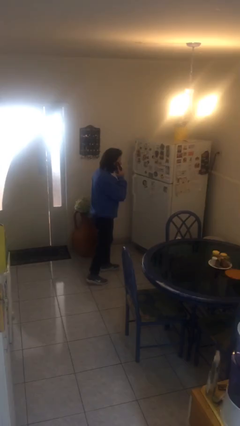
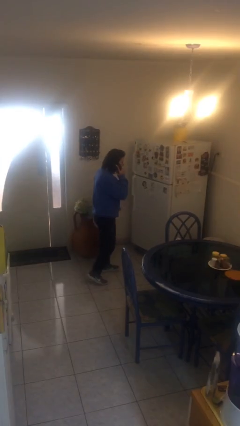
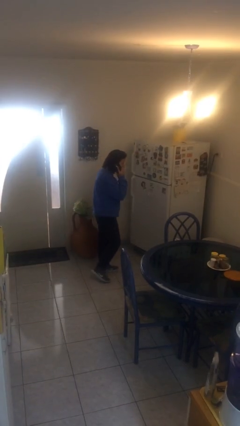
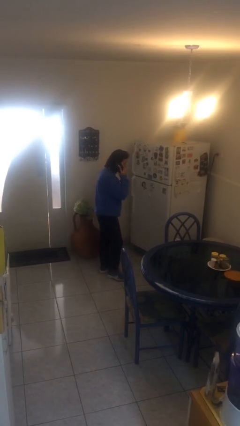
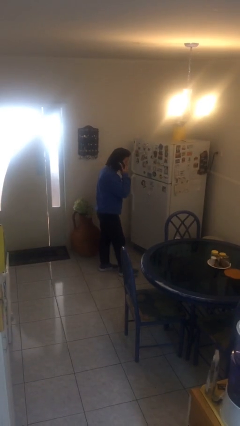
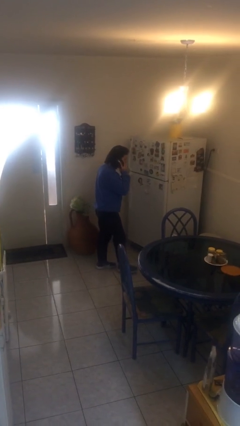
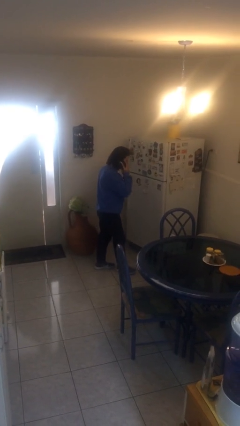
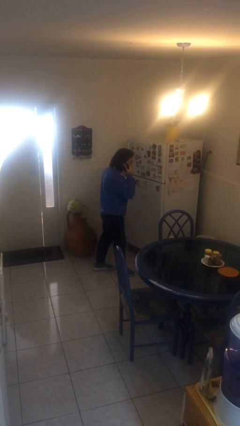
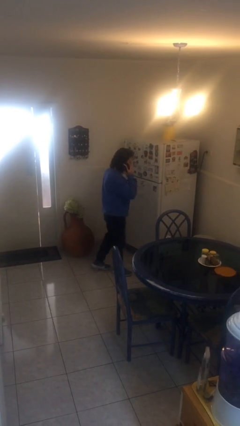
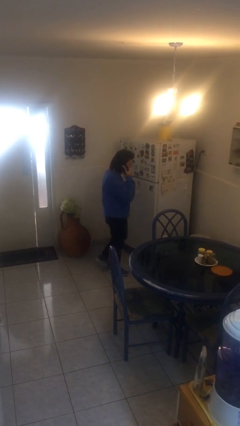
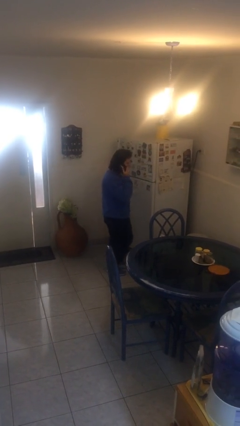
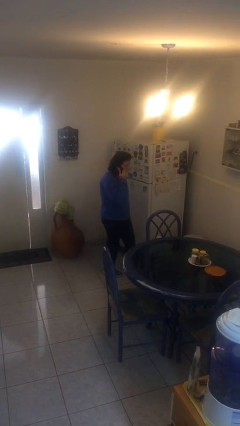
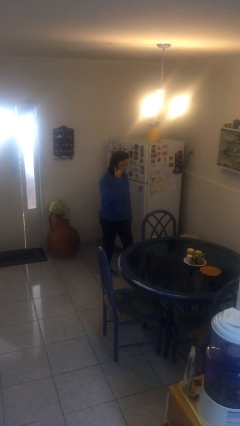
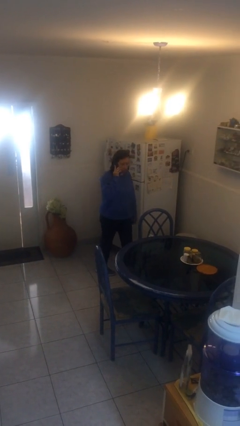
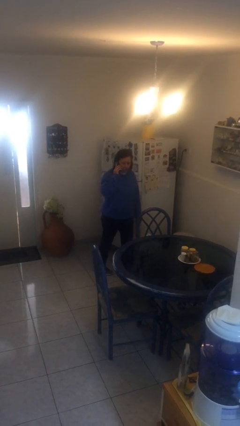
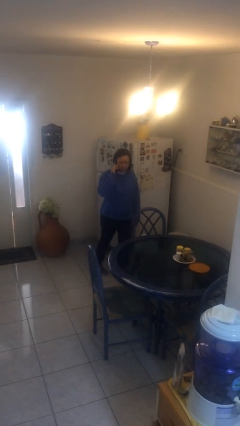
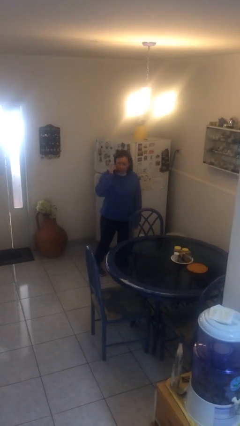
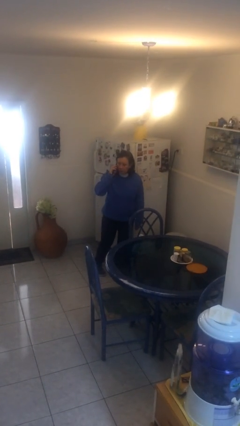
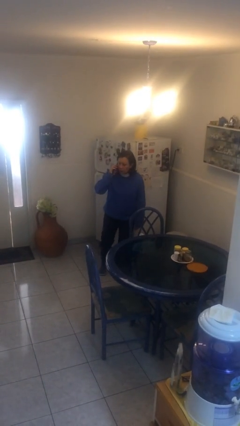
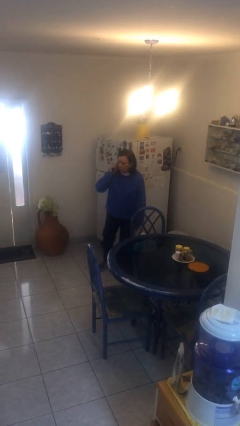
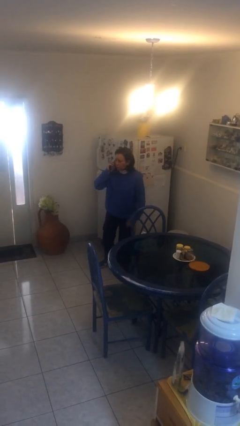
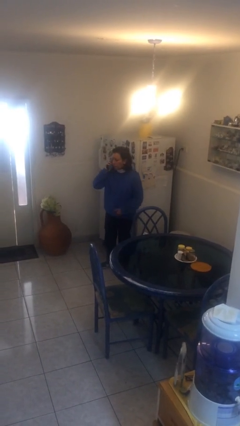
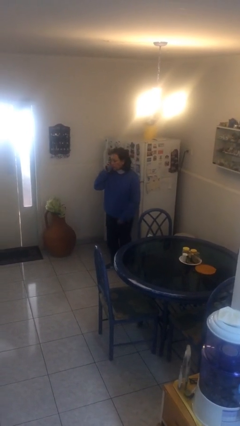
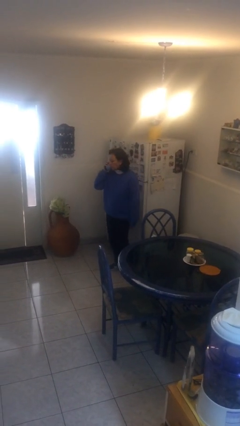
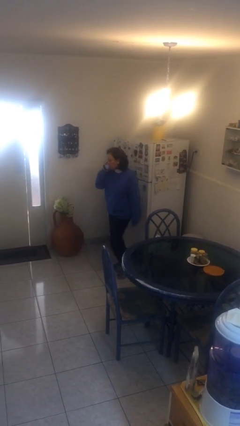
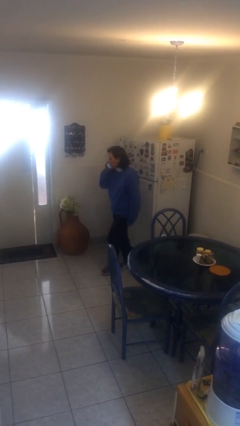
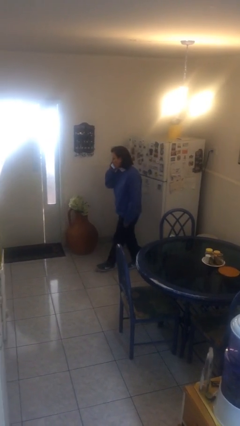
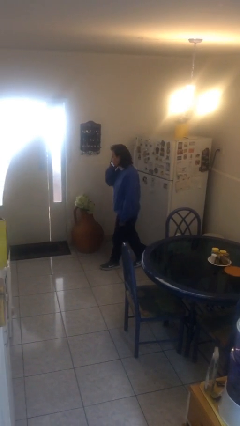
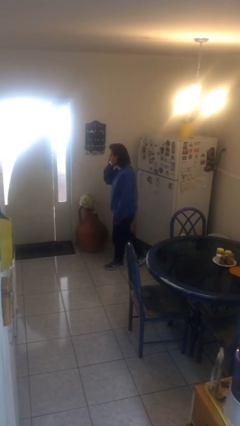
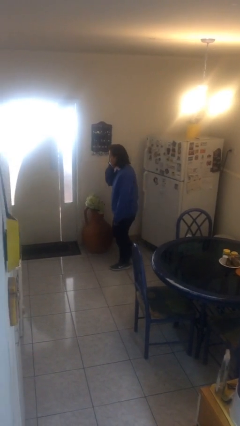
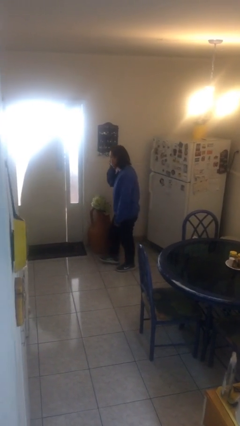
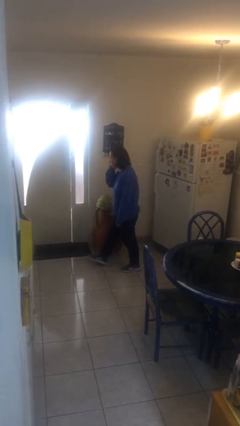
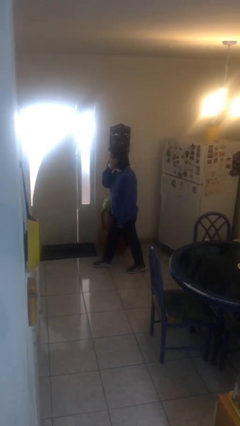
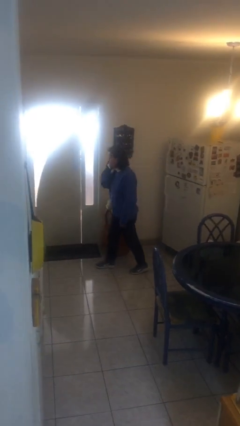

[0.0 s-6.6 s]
person talks on phone

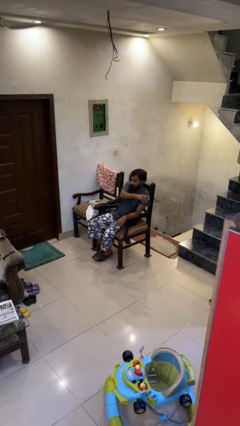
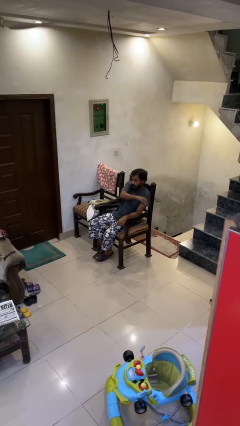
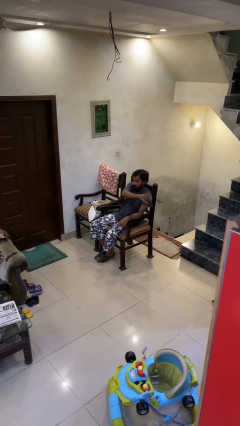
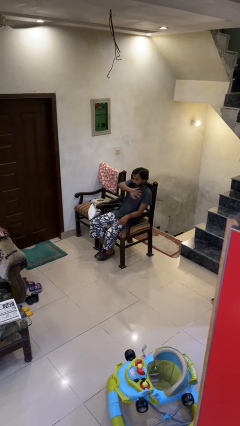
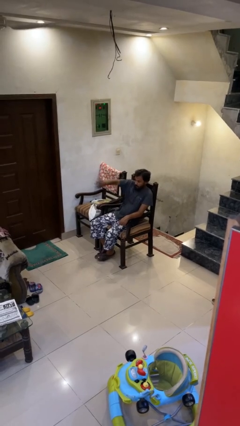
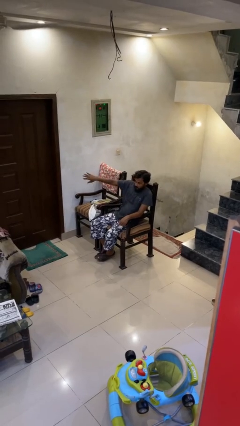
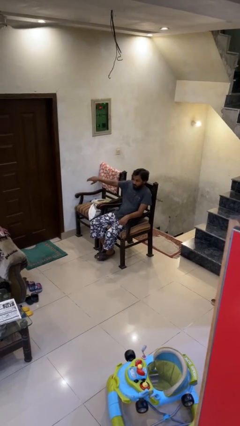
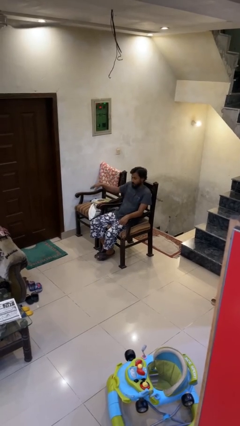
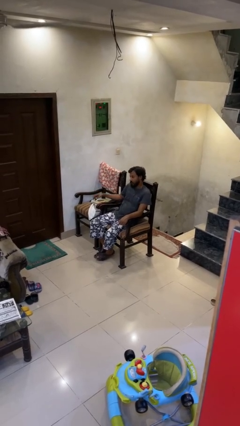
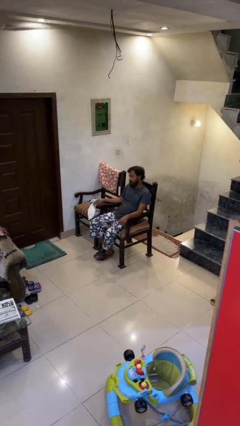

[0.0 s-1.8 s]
person gestures swipe right

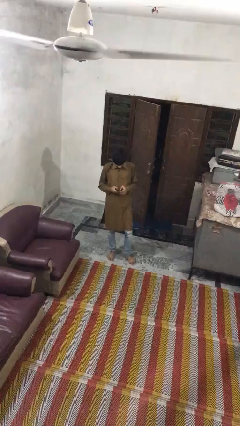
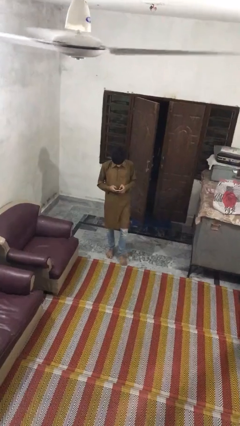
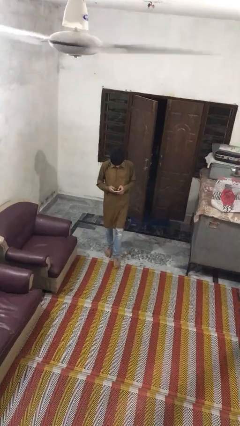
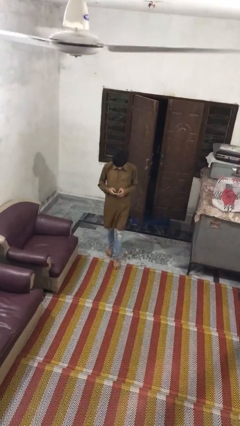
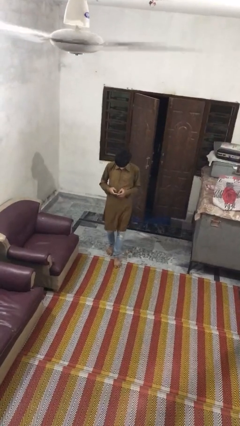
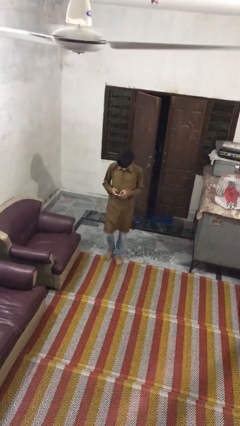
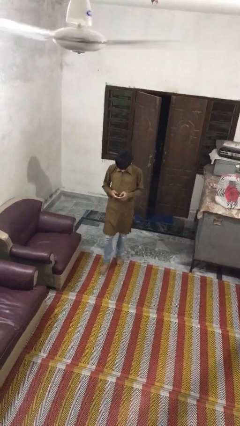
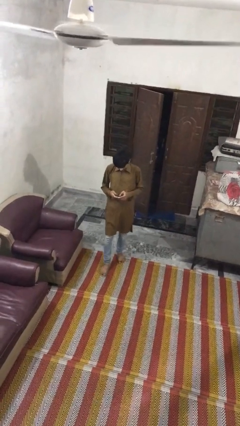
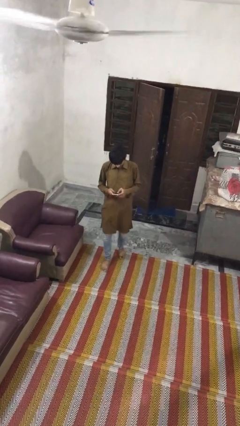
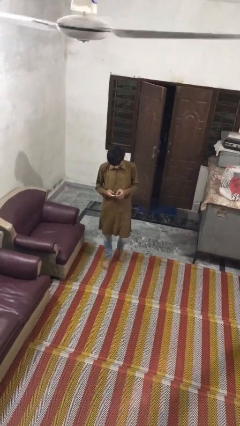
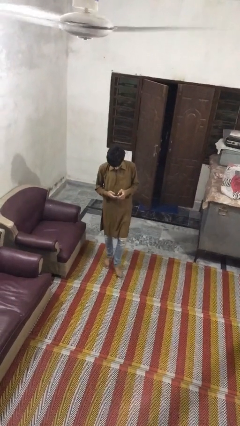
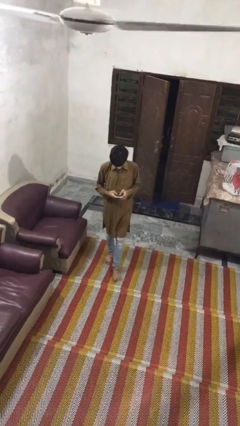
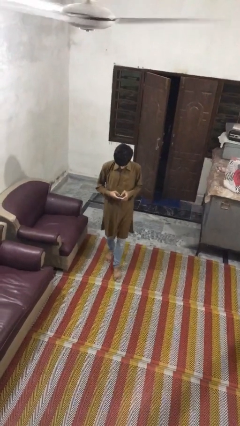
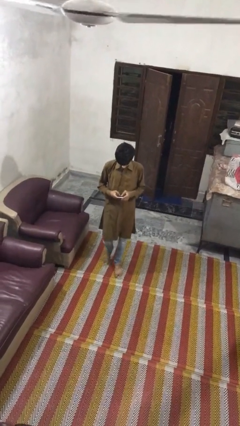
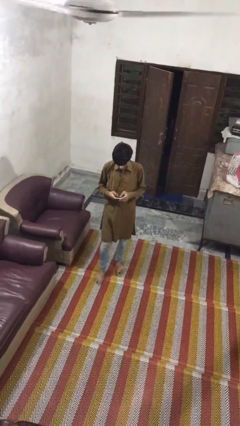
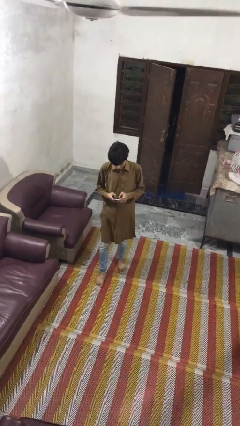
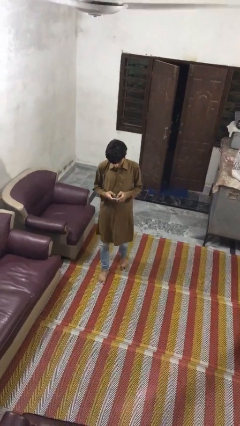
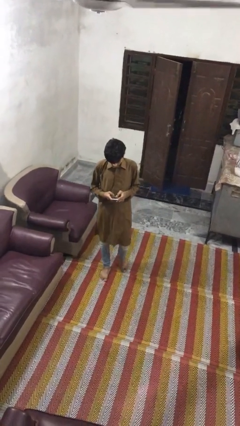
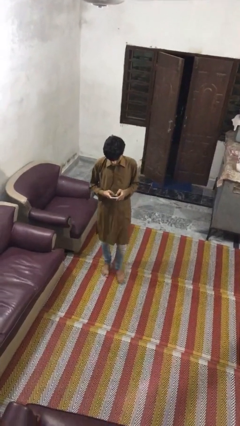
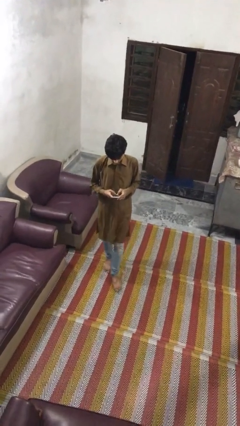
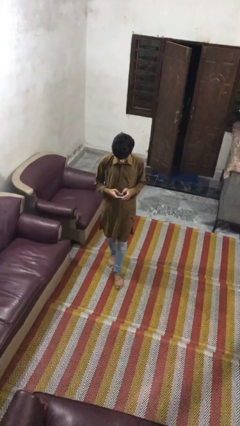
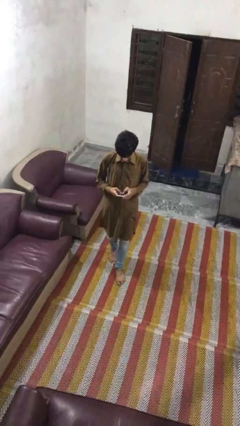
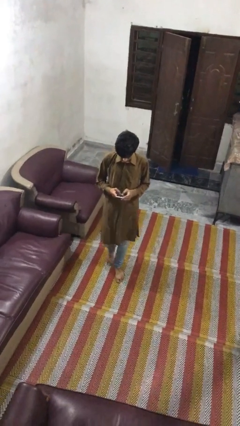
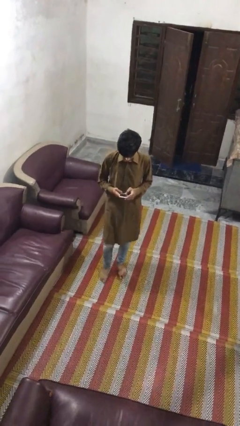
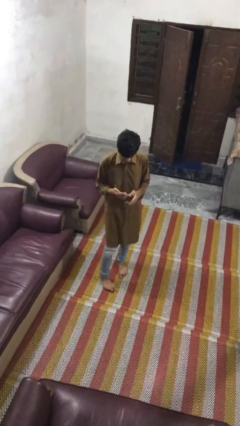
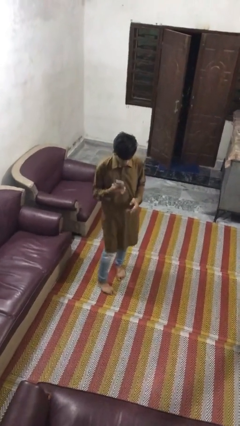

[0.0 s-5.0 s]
person texts on phone

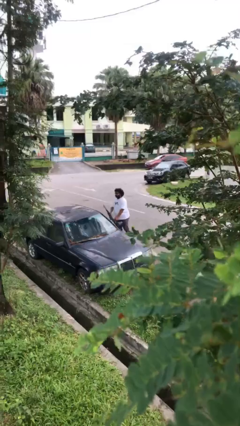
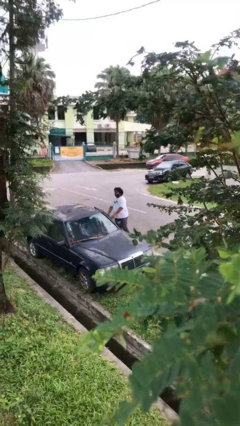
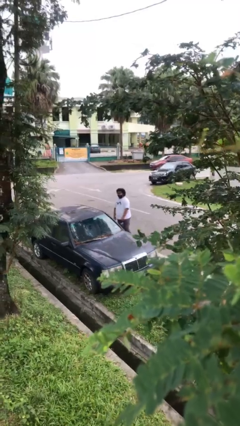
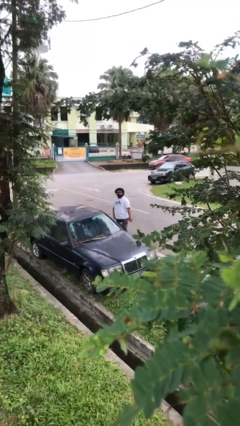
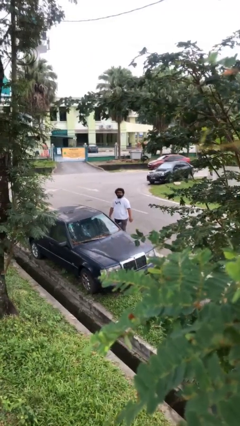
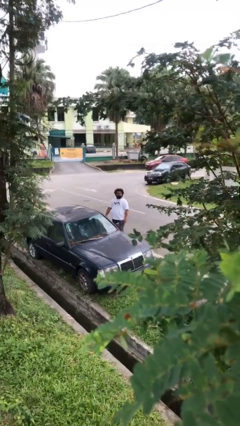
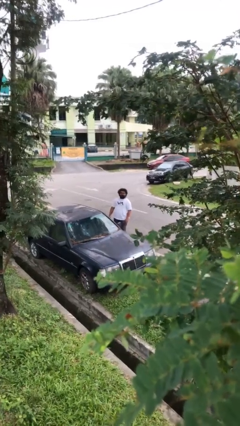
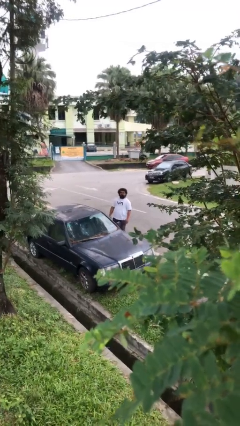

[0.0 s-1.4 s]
person closes car door

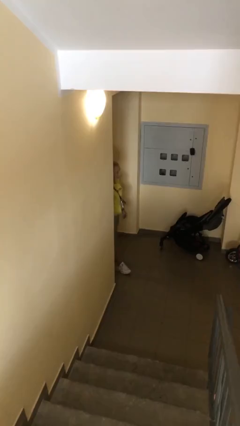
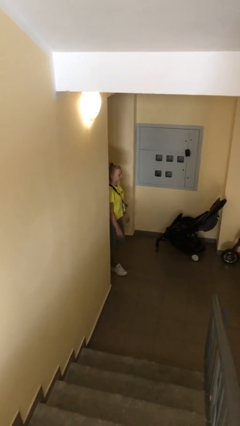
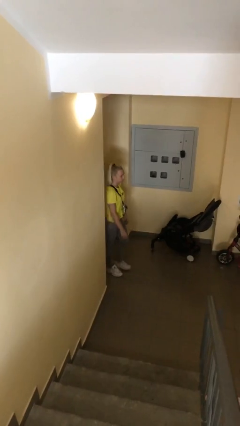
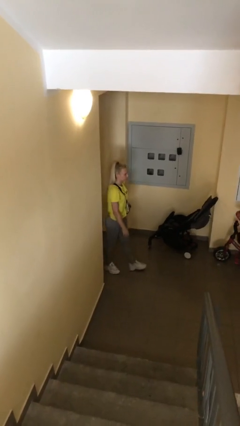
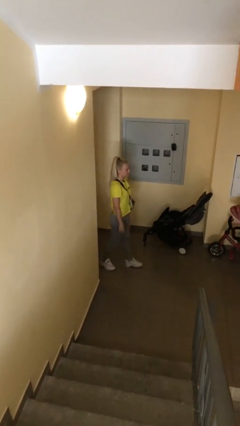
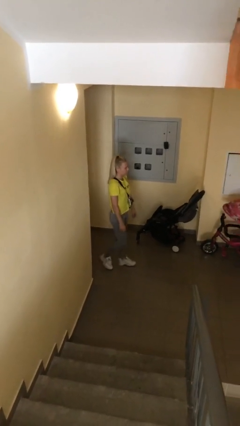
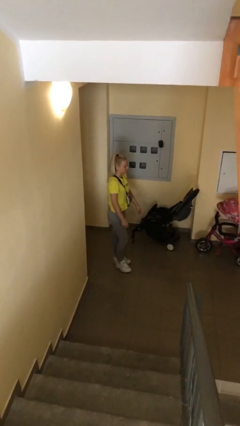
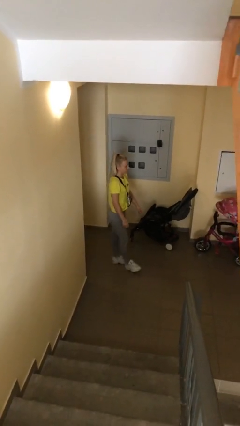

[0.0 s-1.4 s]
person enters scene through structure

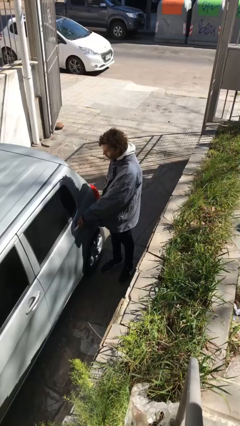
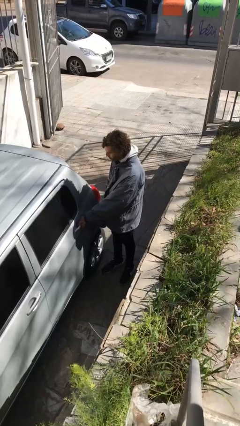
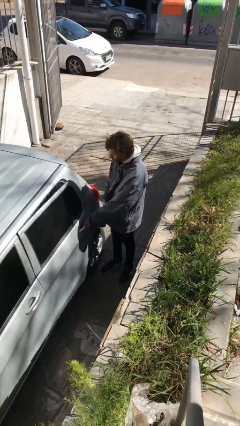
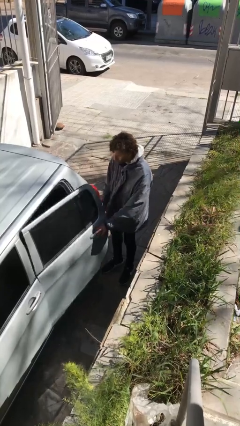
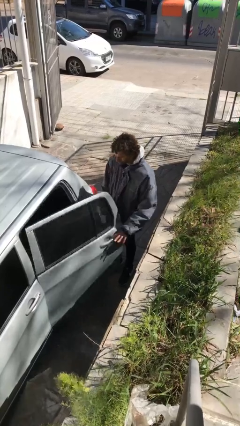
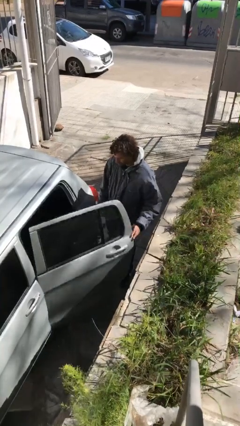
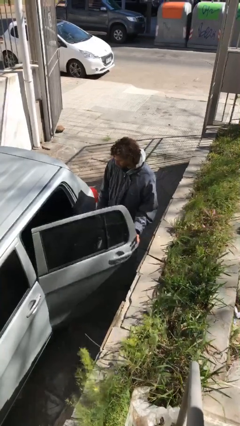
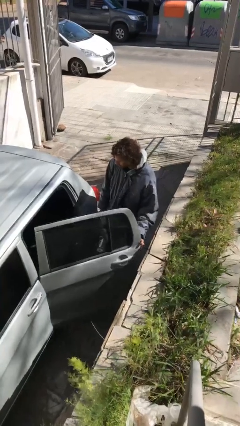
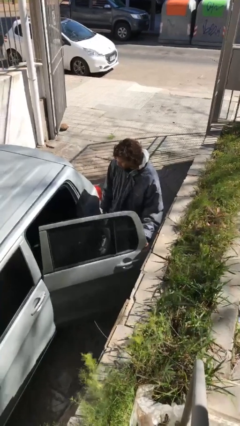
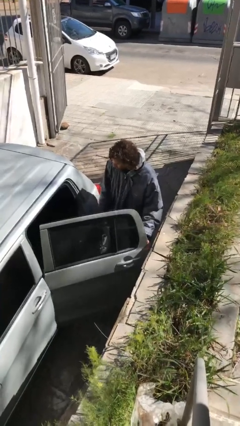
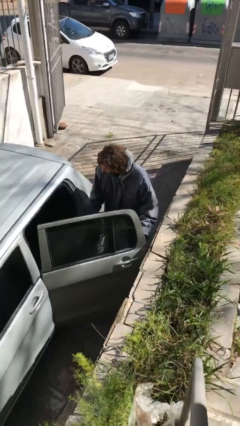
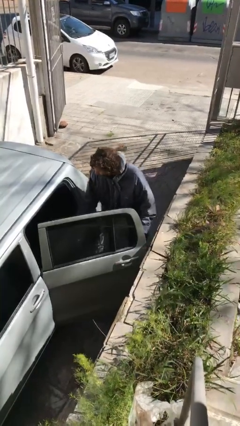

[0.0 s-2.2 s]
person opens car door
